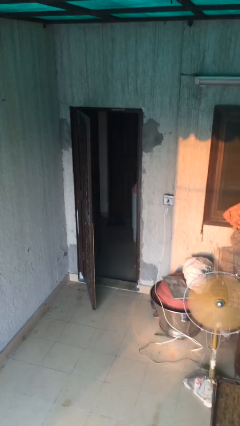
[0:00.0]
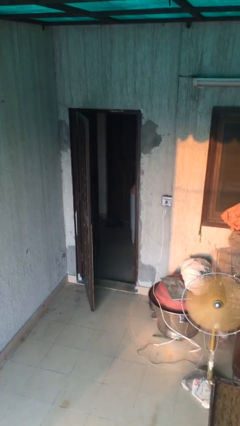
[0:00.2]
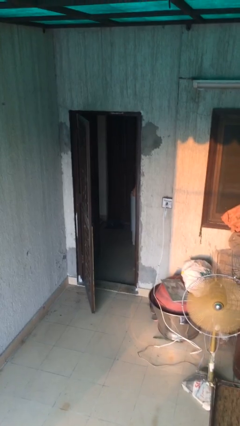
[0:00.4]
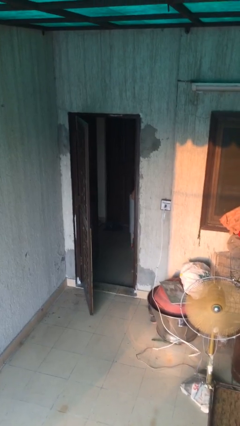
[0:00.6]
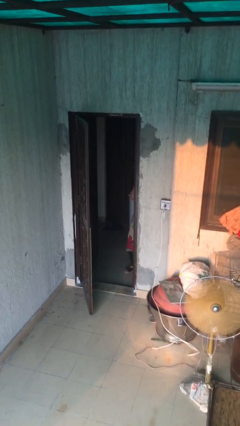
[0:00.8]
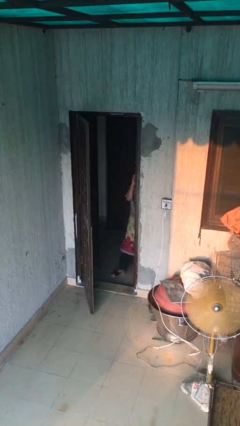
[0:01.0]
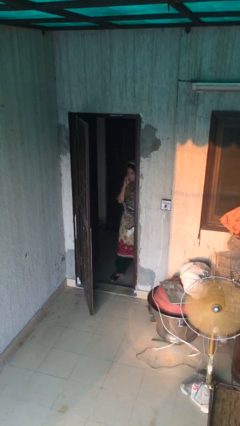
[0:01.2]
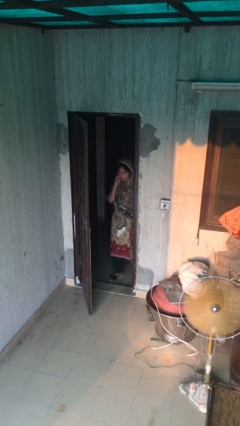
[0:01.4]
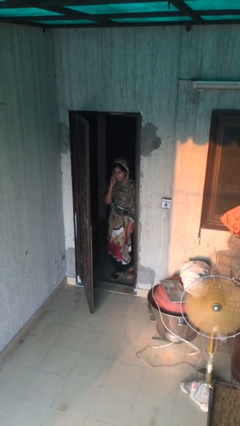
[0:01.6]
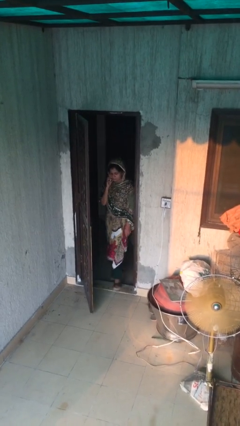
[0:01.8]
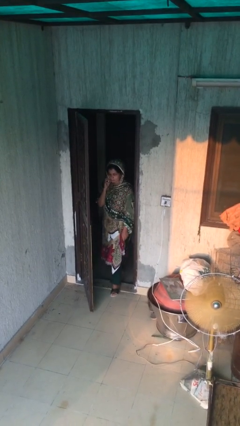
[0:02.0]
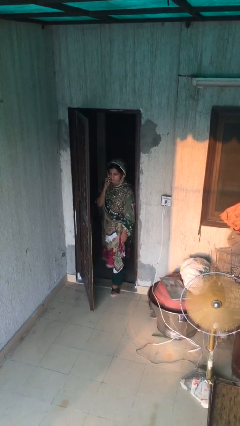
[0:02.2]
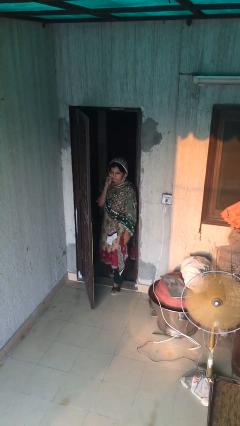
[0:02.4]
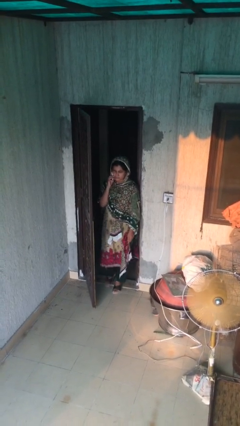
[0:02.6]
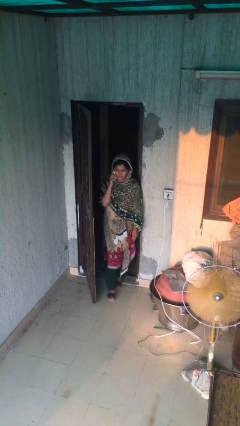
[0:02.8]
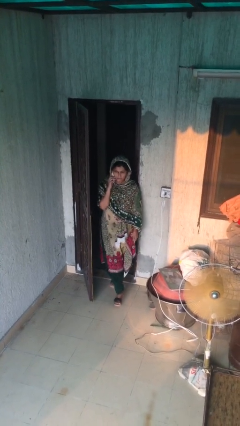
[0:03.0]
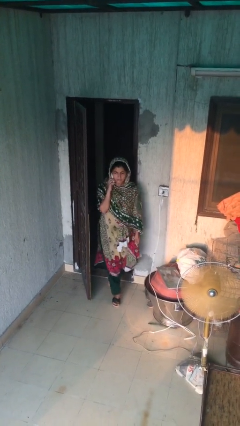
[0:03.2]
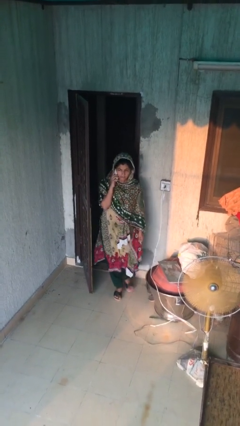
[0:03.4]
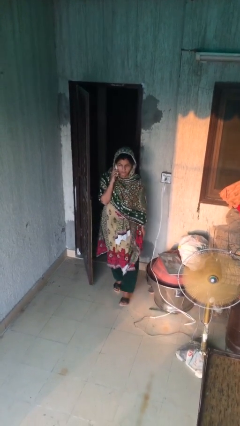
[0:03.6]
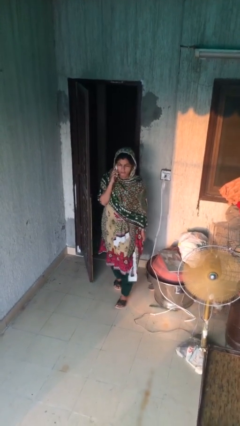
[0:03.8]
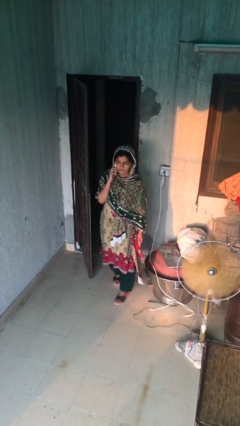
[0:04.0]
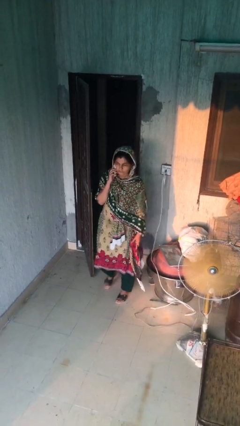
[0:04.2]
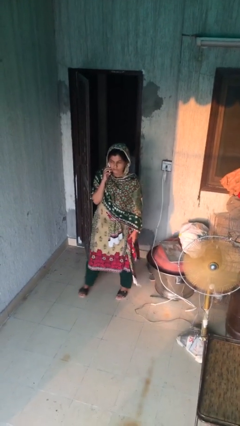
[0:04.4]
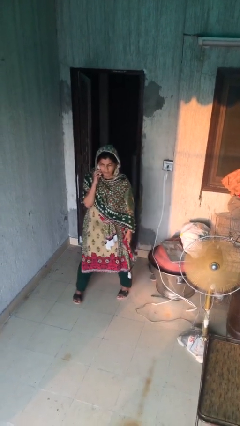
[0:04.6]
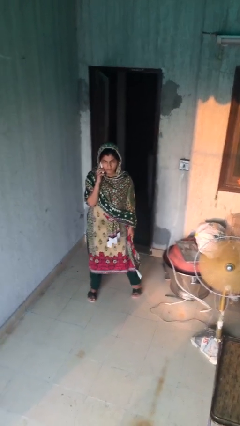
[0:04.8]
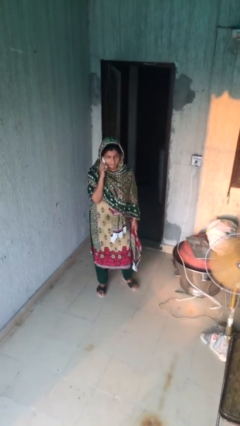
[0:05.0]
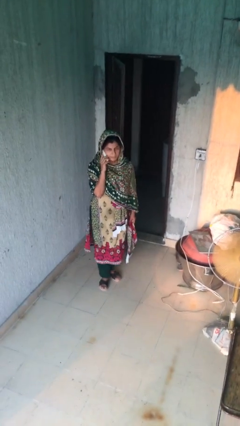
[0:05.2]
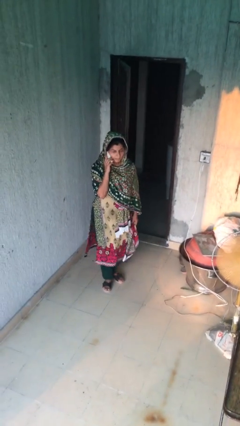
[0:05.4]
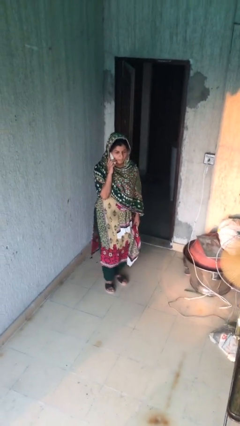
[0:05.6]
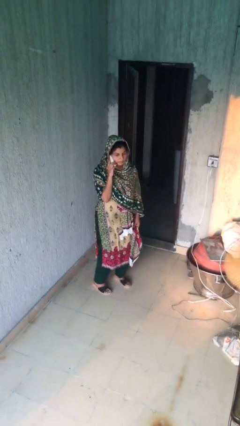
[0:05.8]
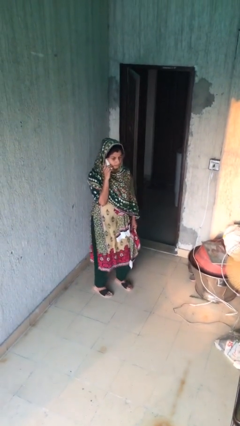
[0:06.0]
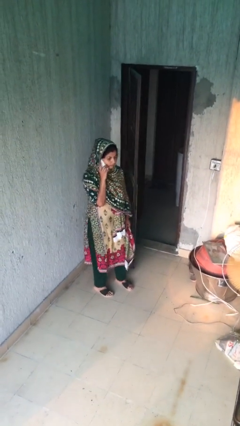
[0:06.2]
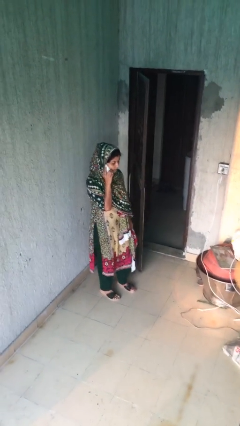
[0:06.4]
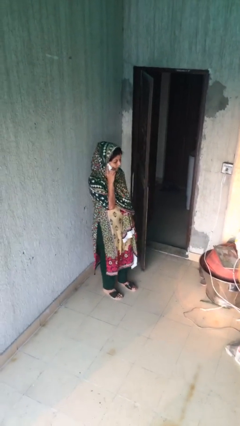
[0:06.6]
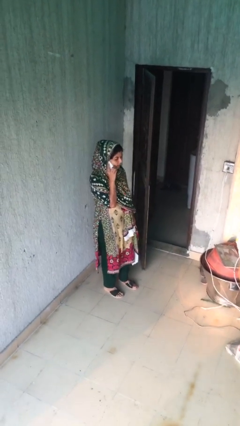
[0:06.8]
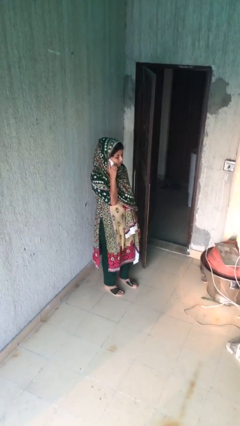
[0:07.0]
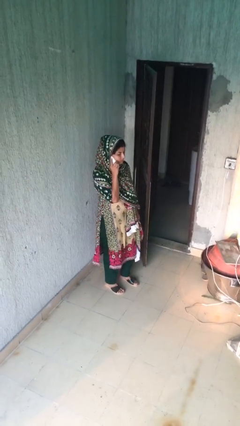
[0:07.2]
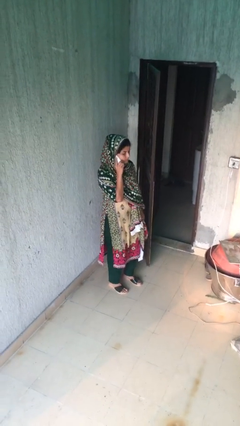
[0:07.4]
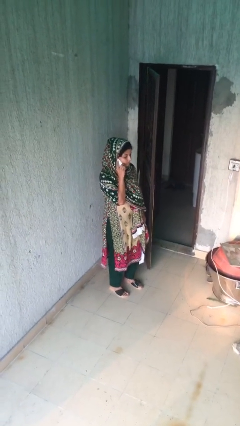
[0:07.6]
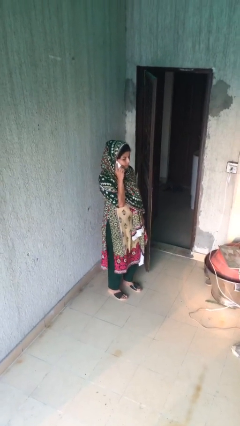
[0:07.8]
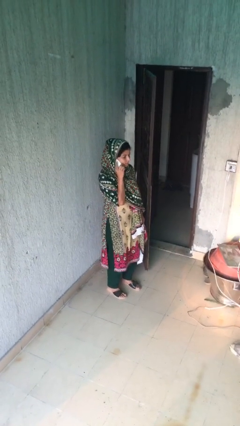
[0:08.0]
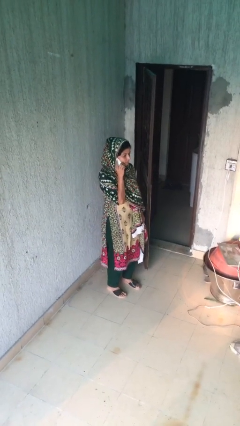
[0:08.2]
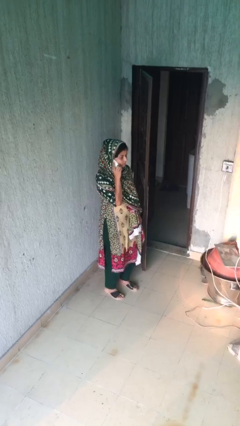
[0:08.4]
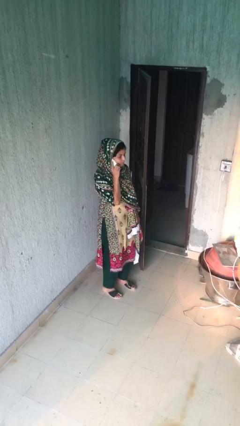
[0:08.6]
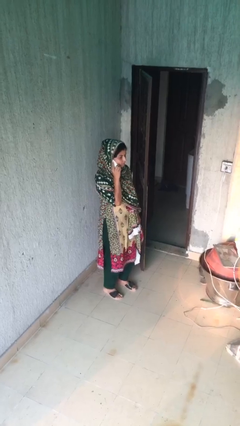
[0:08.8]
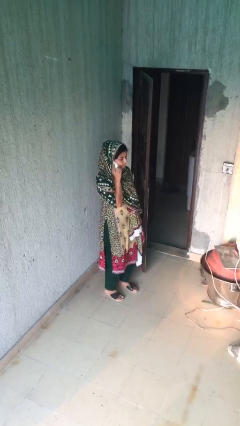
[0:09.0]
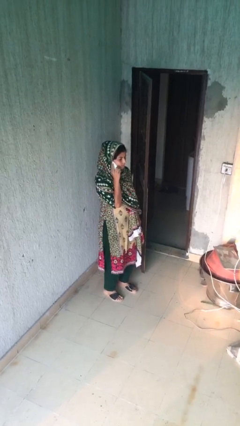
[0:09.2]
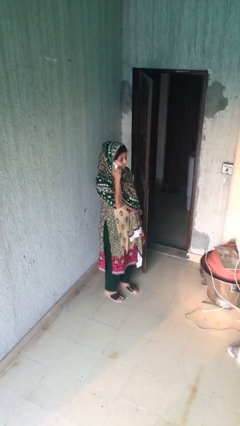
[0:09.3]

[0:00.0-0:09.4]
person enters scene through structure

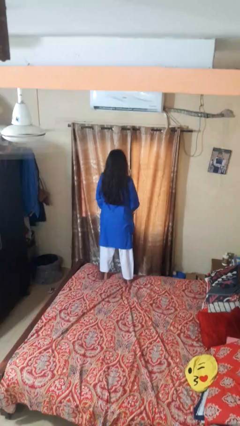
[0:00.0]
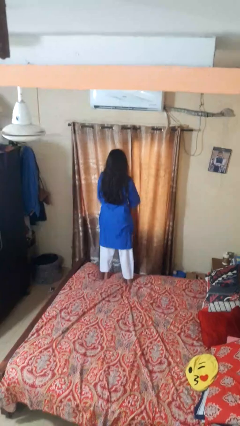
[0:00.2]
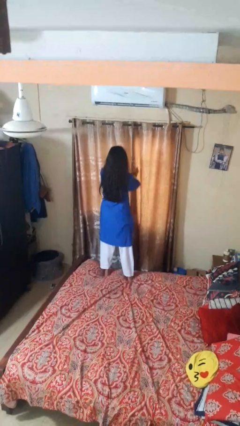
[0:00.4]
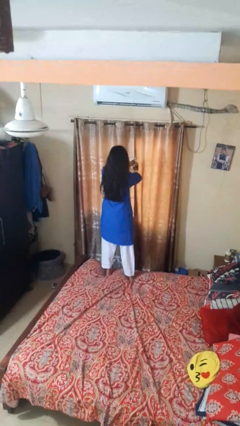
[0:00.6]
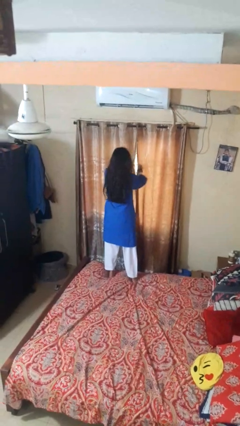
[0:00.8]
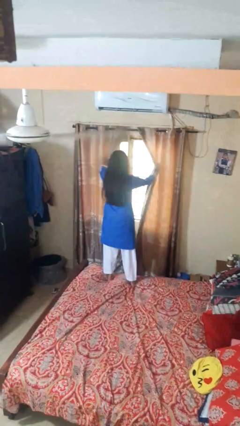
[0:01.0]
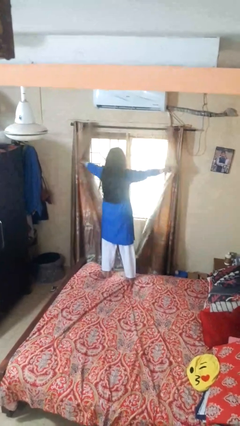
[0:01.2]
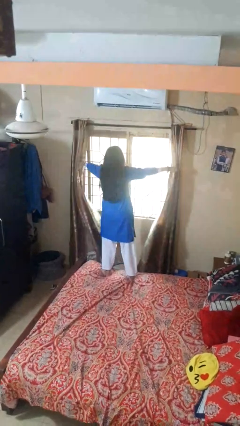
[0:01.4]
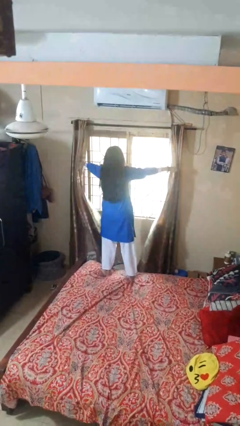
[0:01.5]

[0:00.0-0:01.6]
person opens curtains

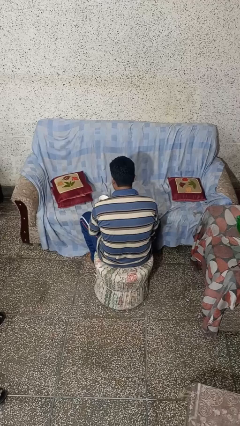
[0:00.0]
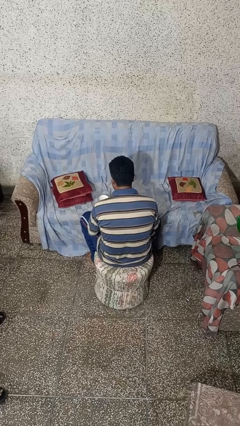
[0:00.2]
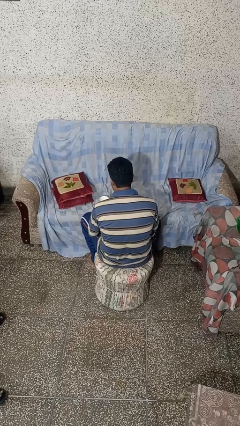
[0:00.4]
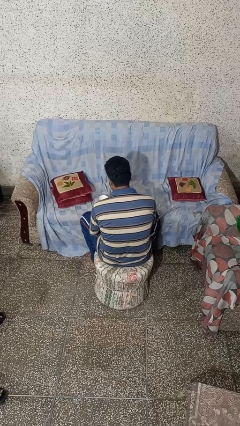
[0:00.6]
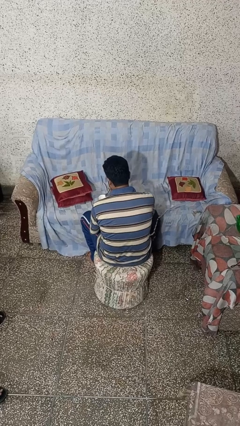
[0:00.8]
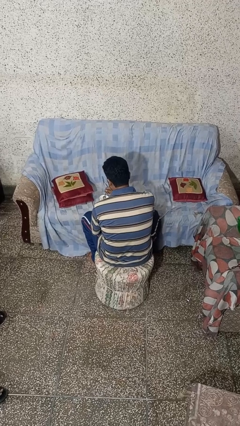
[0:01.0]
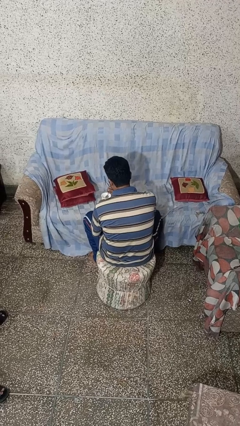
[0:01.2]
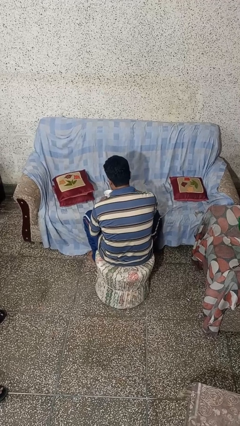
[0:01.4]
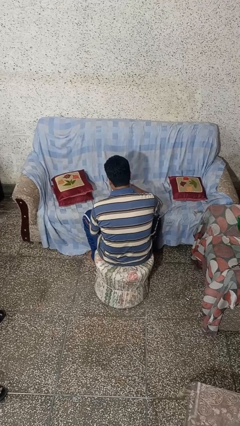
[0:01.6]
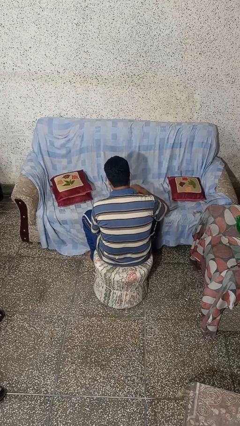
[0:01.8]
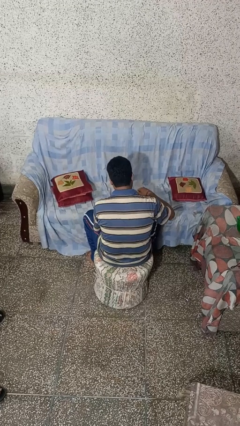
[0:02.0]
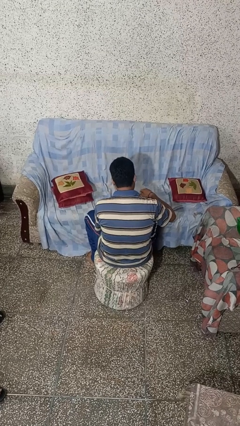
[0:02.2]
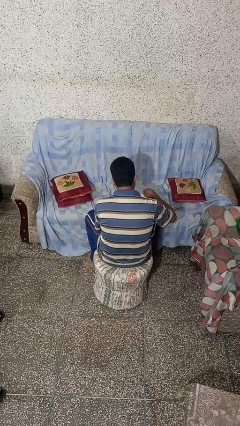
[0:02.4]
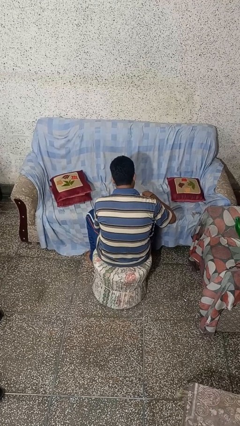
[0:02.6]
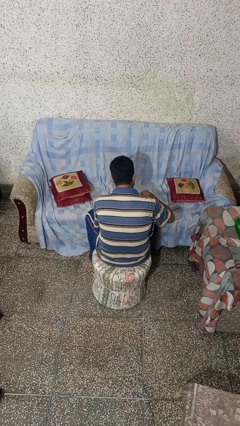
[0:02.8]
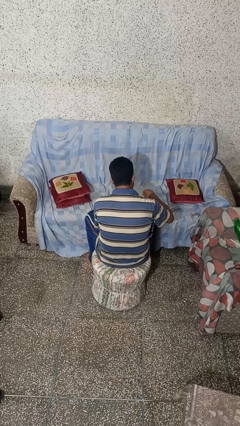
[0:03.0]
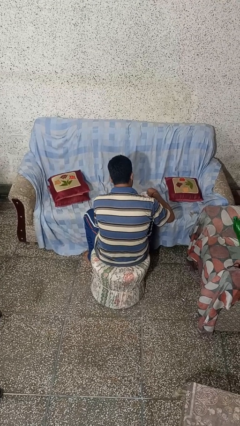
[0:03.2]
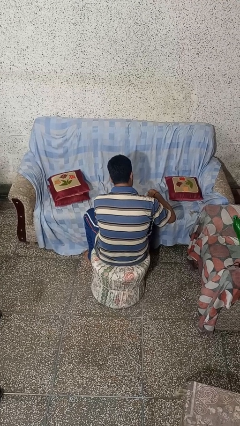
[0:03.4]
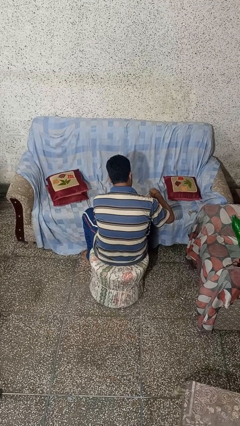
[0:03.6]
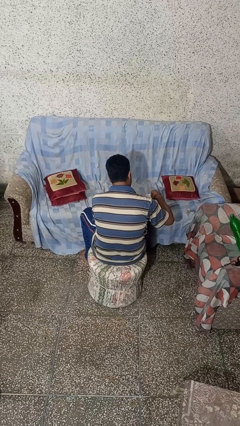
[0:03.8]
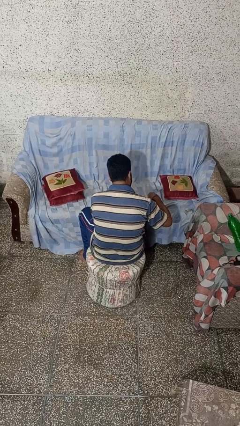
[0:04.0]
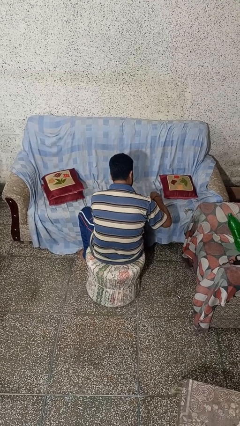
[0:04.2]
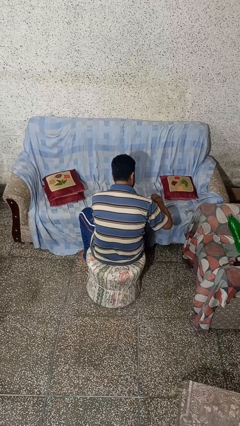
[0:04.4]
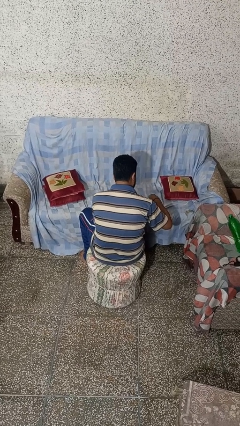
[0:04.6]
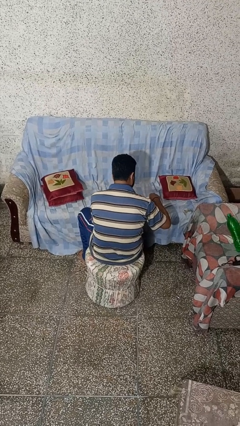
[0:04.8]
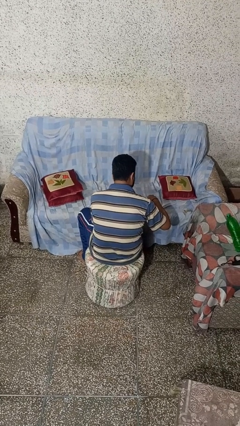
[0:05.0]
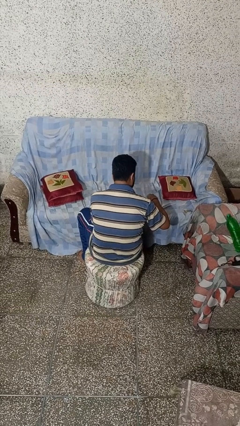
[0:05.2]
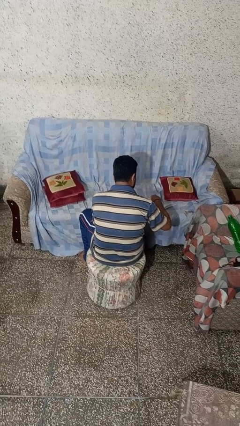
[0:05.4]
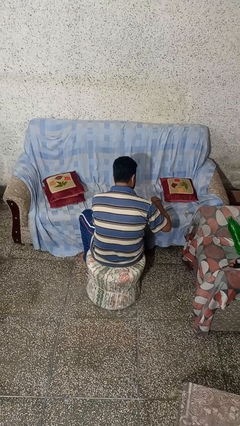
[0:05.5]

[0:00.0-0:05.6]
person stirs mug

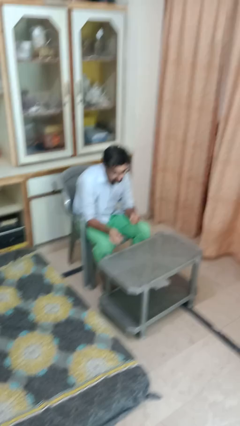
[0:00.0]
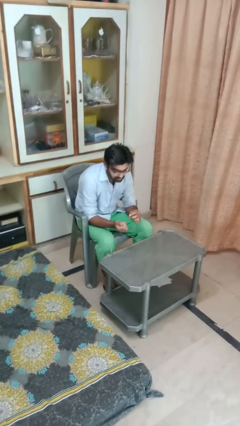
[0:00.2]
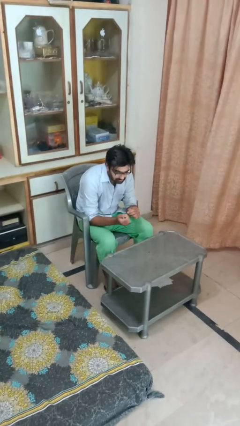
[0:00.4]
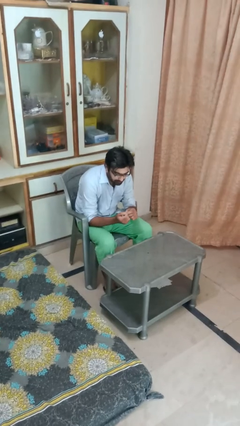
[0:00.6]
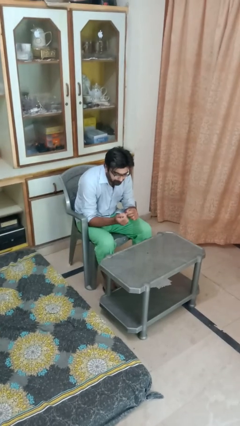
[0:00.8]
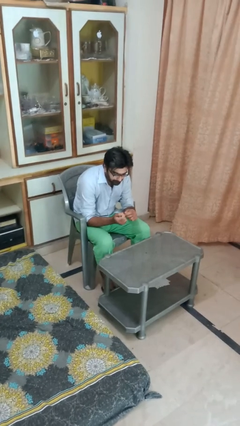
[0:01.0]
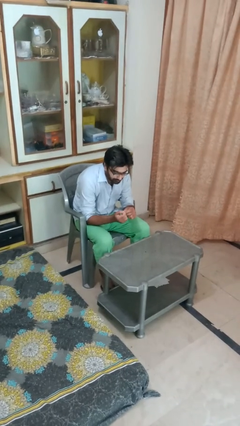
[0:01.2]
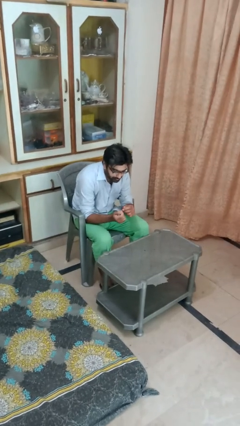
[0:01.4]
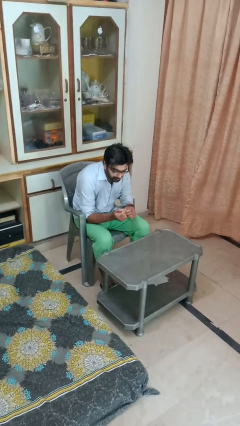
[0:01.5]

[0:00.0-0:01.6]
person files fingernails
